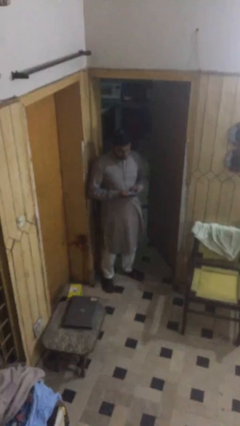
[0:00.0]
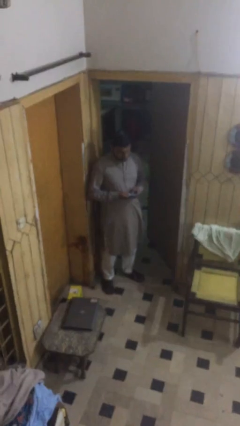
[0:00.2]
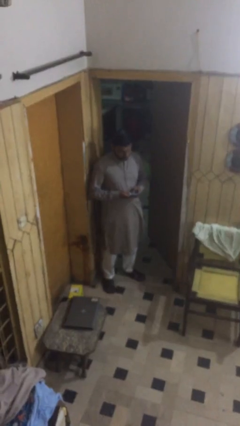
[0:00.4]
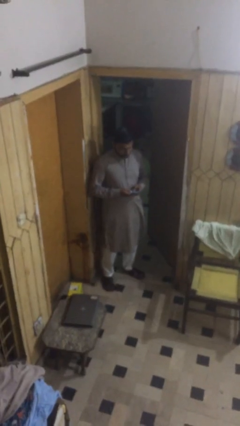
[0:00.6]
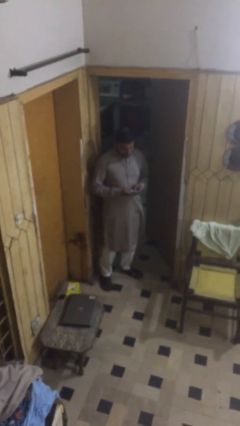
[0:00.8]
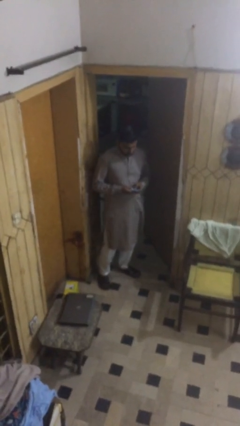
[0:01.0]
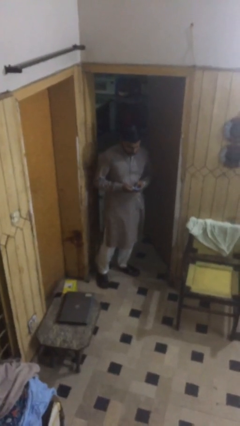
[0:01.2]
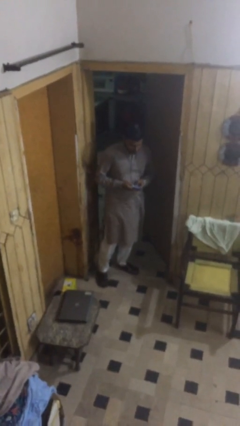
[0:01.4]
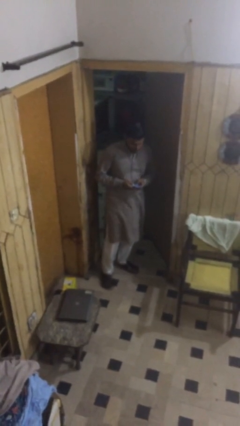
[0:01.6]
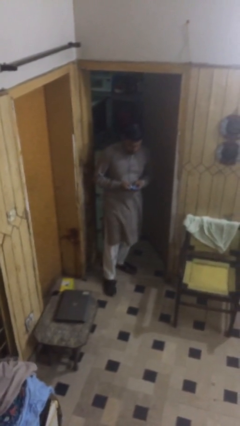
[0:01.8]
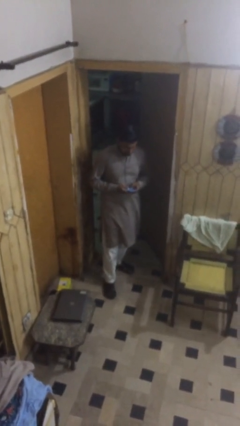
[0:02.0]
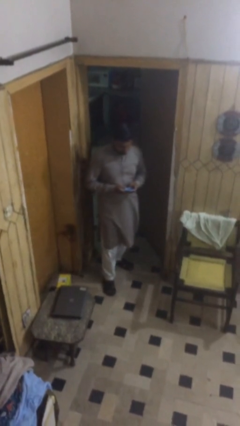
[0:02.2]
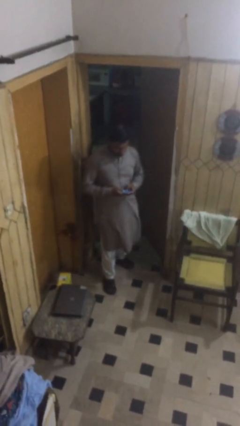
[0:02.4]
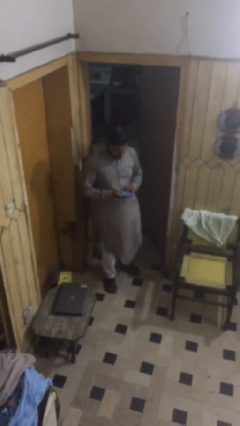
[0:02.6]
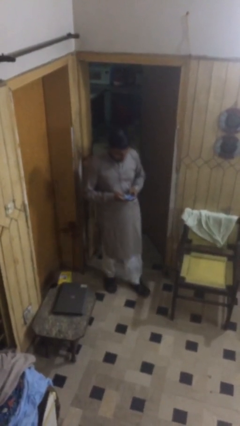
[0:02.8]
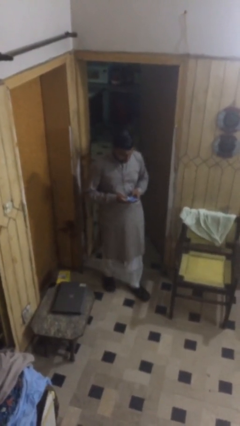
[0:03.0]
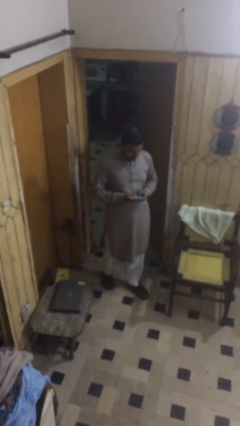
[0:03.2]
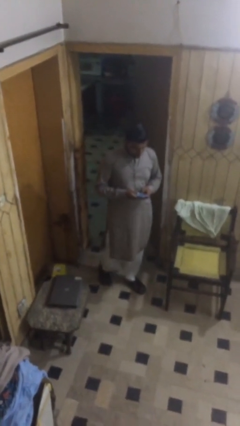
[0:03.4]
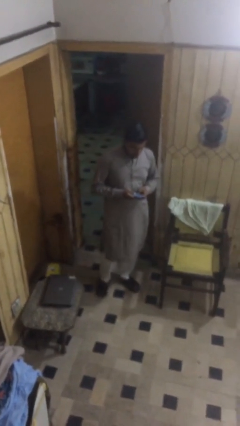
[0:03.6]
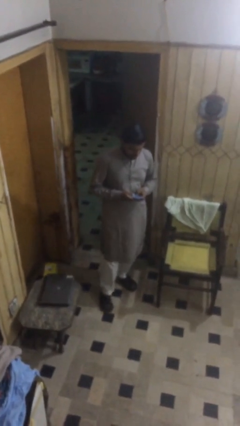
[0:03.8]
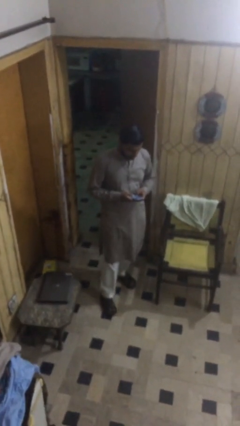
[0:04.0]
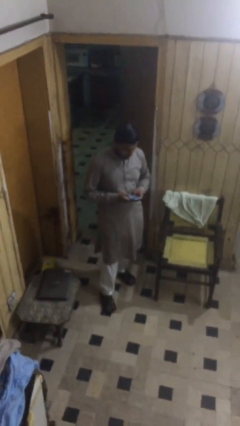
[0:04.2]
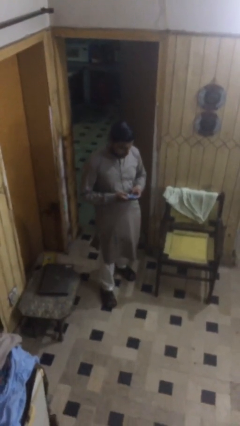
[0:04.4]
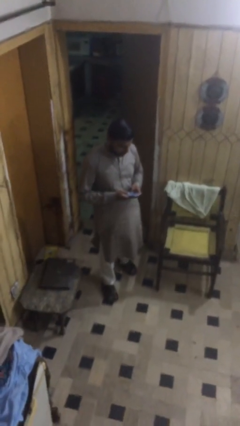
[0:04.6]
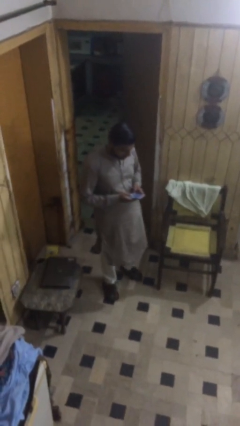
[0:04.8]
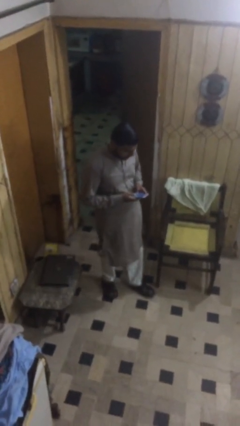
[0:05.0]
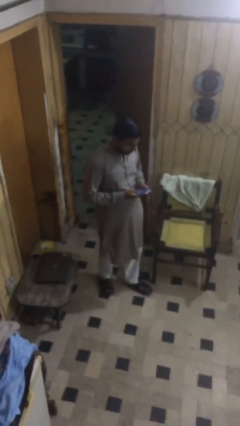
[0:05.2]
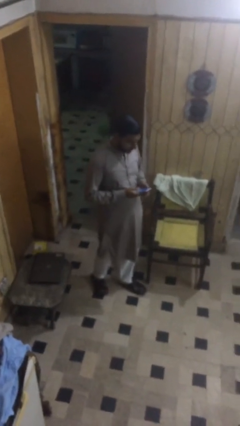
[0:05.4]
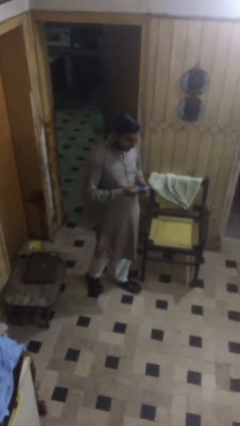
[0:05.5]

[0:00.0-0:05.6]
person texts on phone

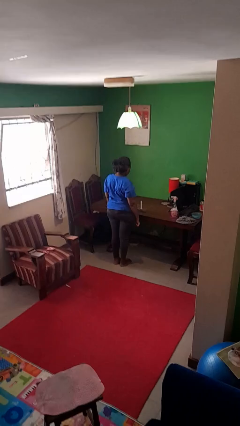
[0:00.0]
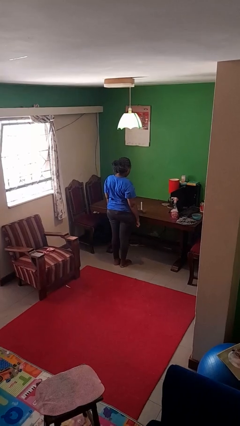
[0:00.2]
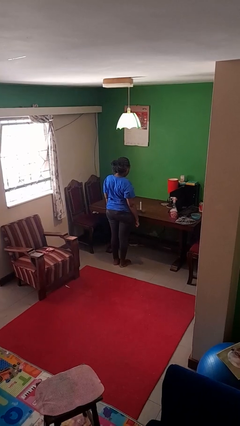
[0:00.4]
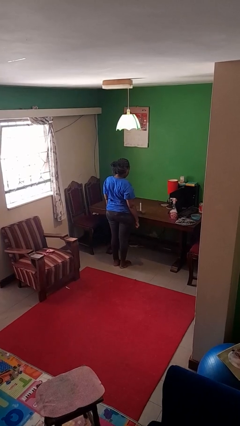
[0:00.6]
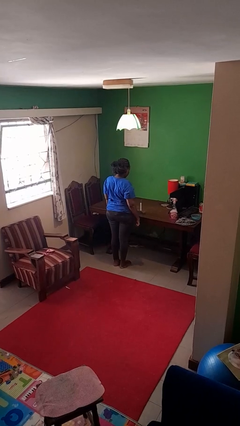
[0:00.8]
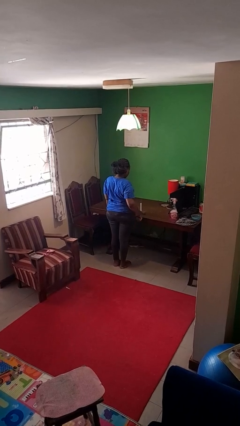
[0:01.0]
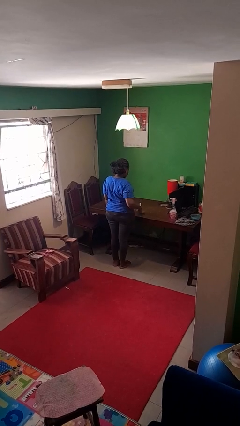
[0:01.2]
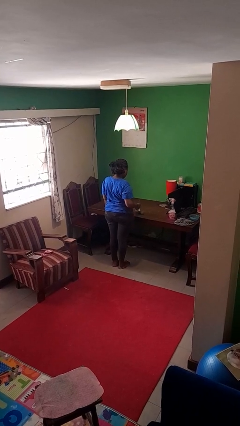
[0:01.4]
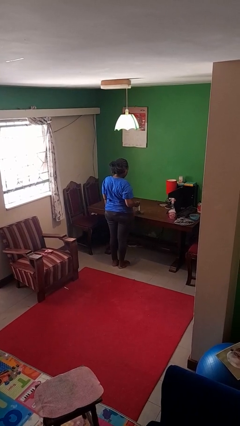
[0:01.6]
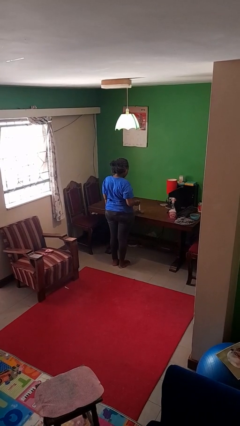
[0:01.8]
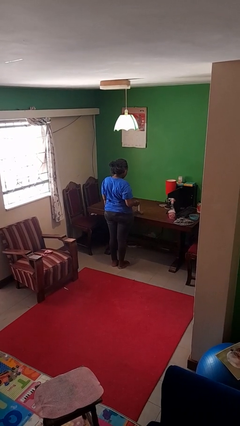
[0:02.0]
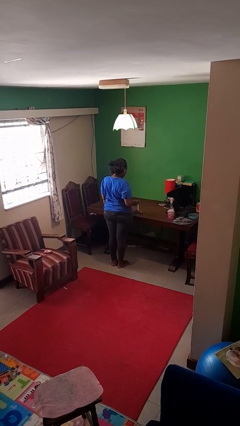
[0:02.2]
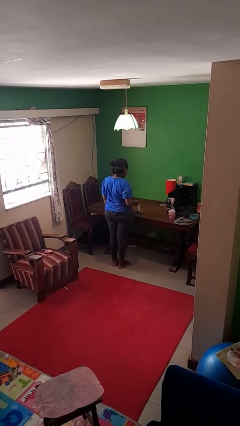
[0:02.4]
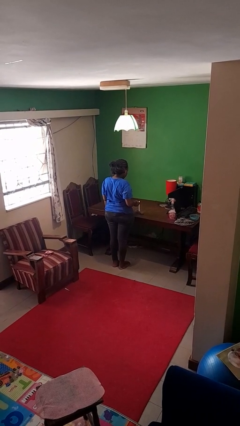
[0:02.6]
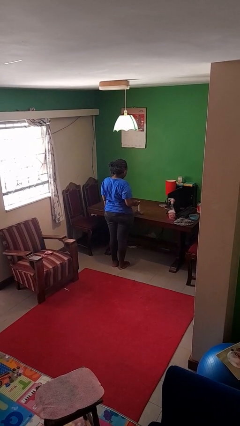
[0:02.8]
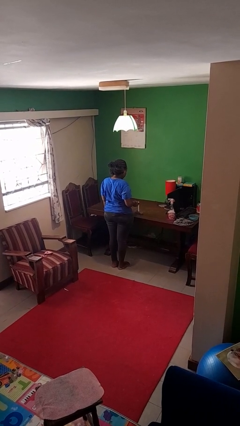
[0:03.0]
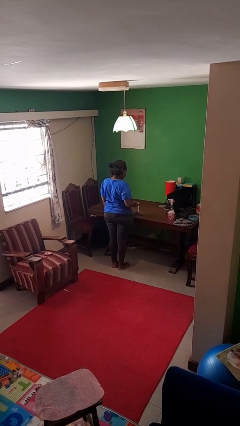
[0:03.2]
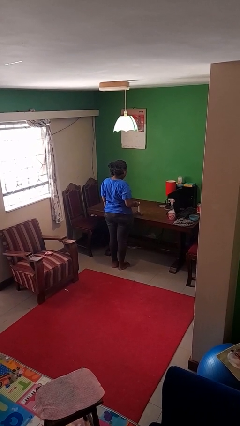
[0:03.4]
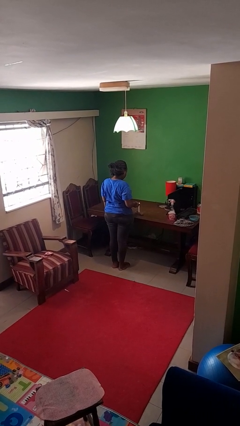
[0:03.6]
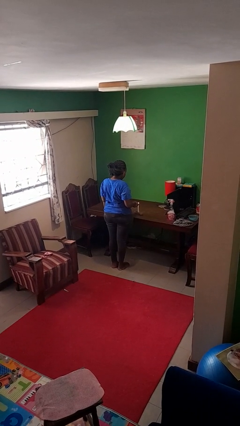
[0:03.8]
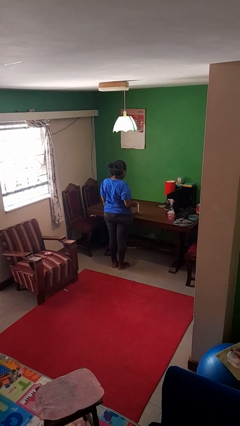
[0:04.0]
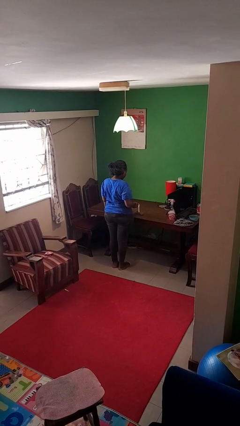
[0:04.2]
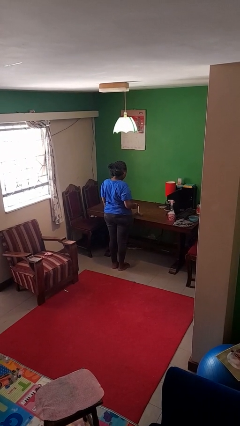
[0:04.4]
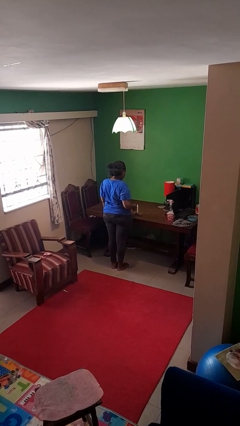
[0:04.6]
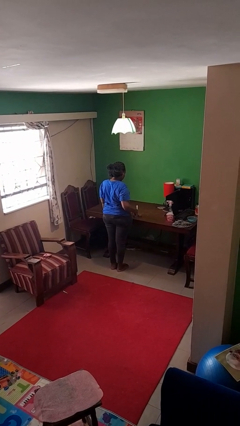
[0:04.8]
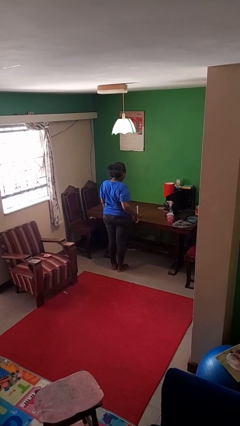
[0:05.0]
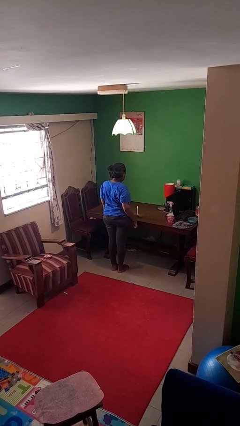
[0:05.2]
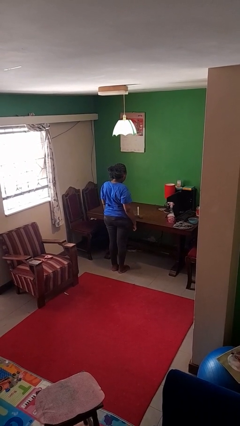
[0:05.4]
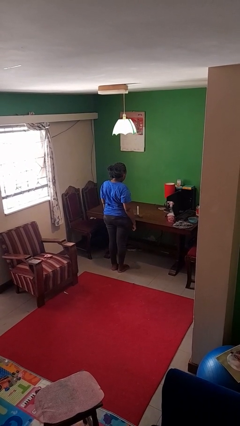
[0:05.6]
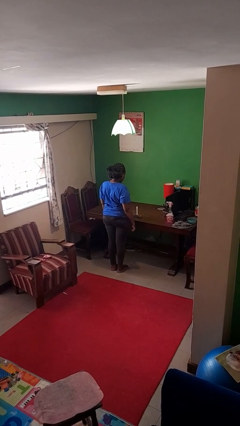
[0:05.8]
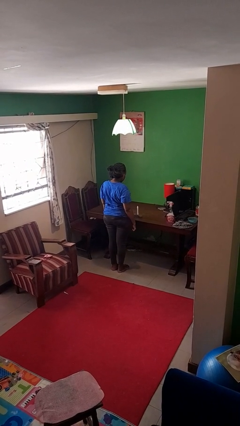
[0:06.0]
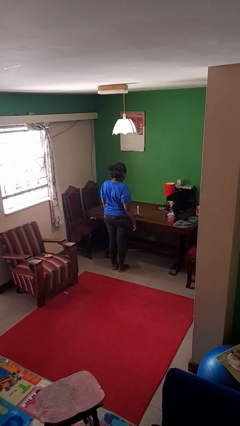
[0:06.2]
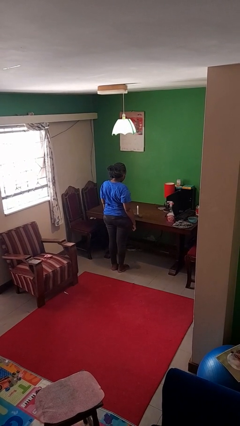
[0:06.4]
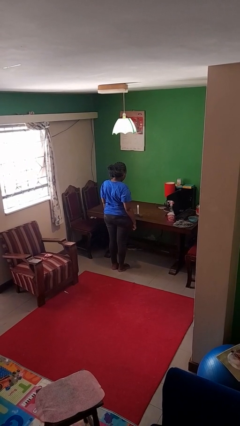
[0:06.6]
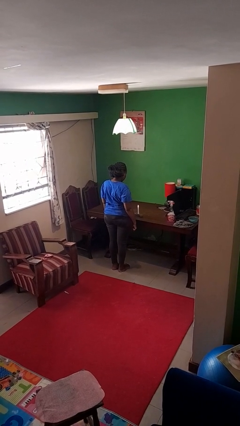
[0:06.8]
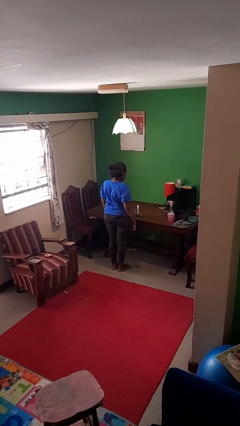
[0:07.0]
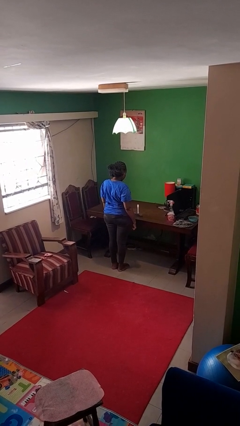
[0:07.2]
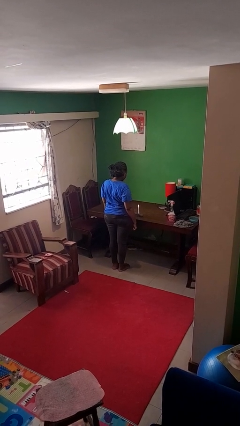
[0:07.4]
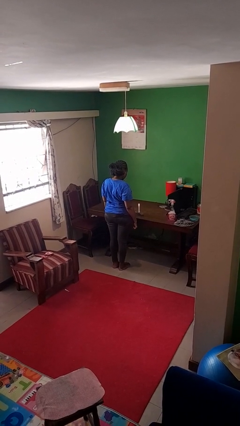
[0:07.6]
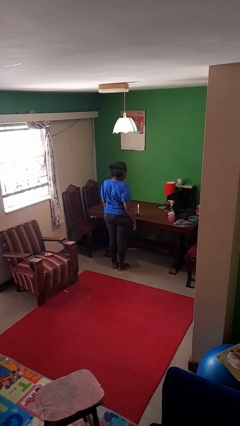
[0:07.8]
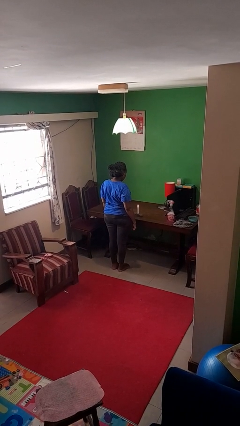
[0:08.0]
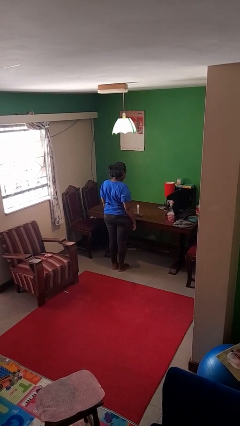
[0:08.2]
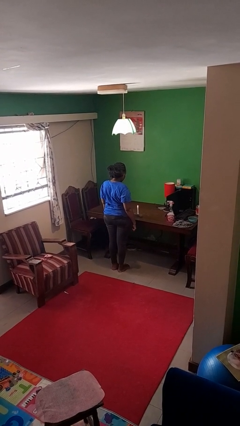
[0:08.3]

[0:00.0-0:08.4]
person lights candle

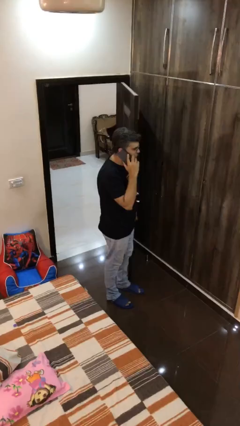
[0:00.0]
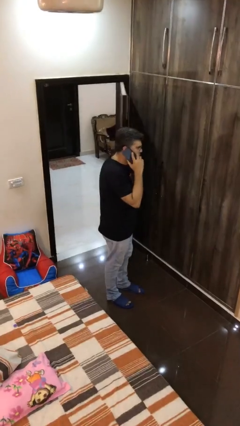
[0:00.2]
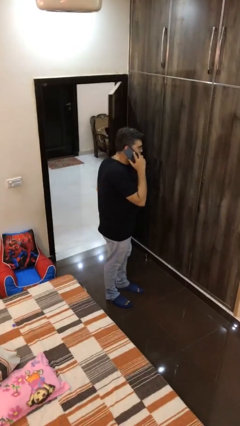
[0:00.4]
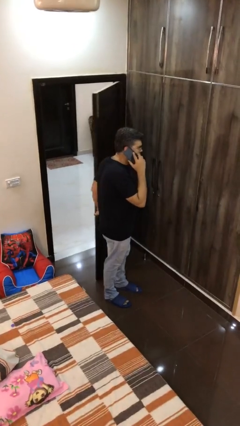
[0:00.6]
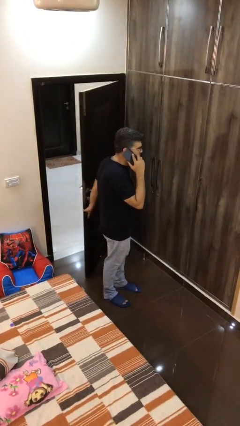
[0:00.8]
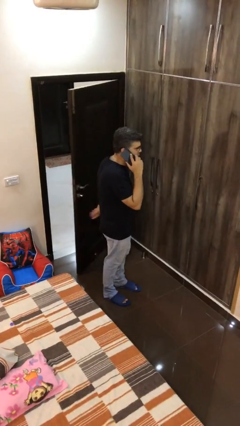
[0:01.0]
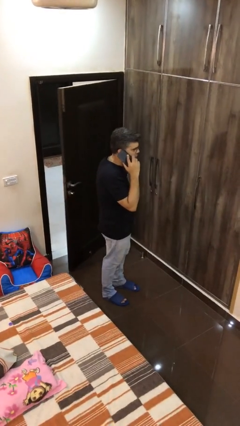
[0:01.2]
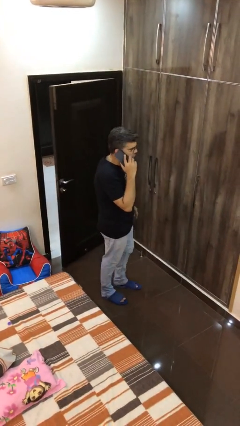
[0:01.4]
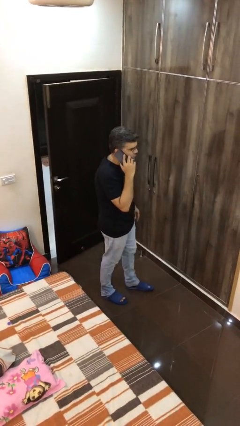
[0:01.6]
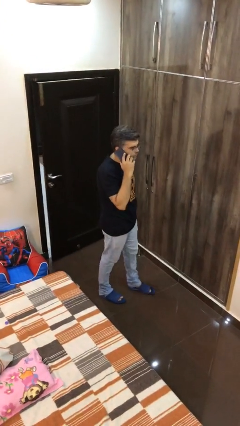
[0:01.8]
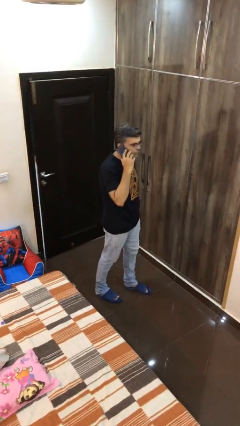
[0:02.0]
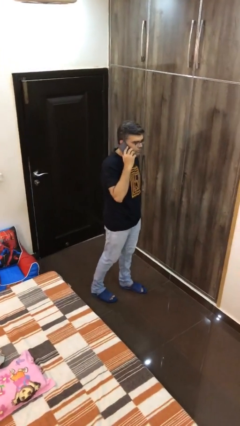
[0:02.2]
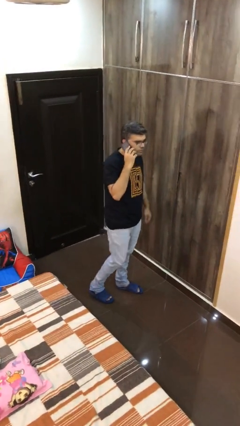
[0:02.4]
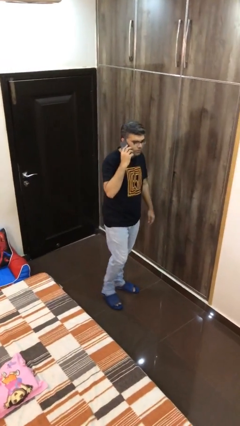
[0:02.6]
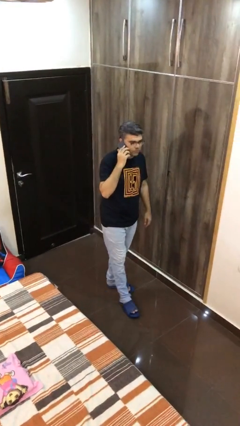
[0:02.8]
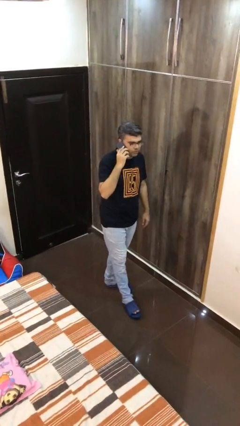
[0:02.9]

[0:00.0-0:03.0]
person closes facility door

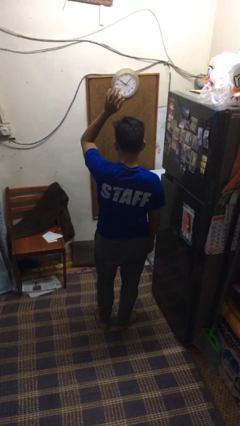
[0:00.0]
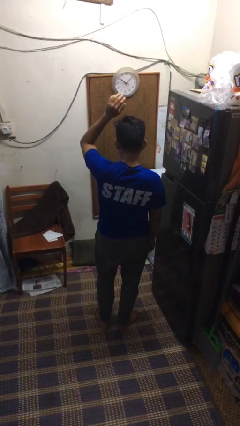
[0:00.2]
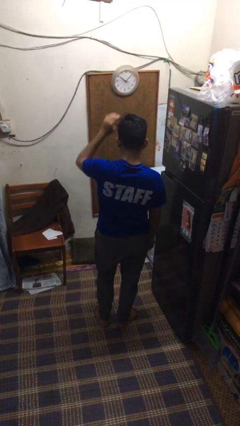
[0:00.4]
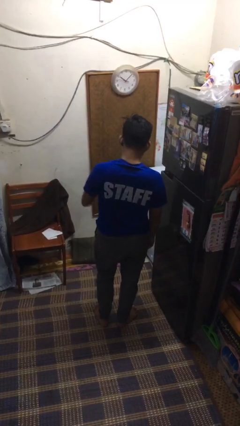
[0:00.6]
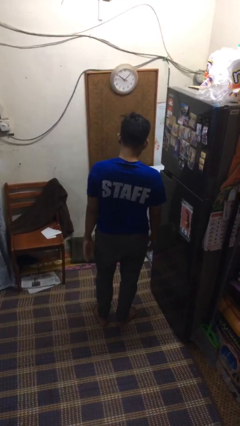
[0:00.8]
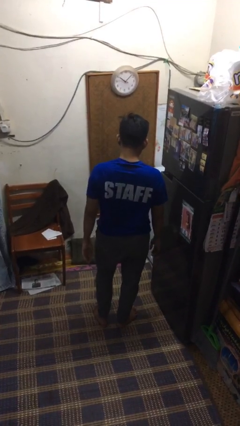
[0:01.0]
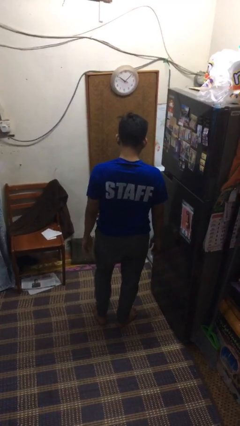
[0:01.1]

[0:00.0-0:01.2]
person gestures lower hand
